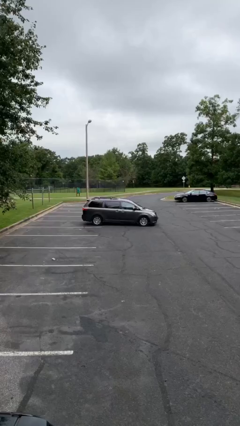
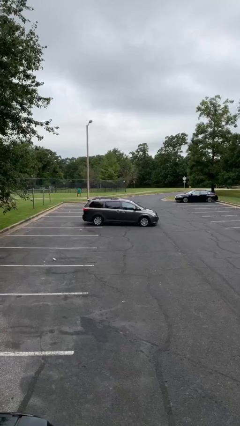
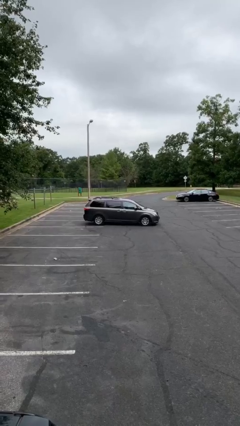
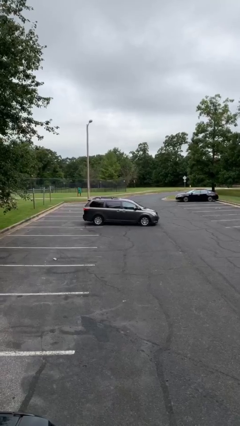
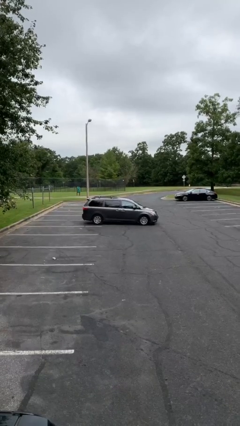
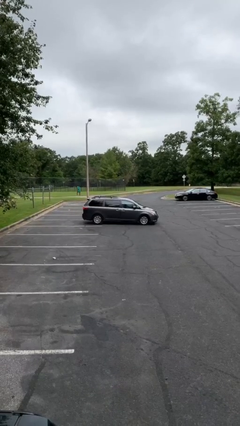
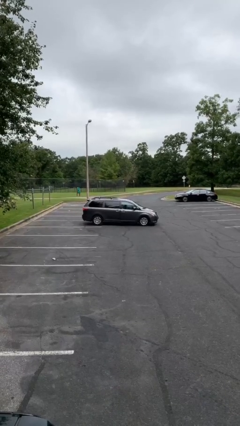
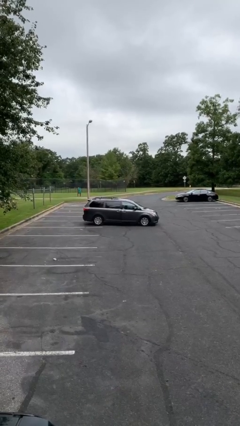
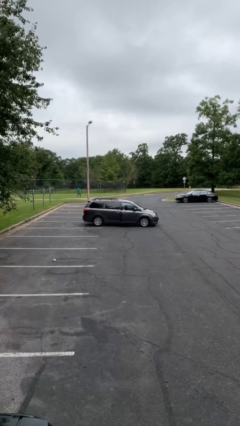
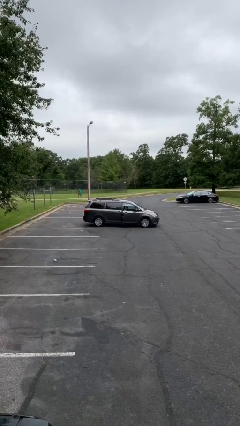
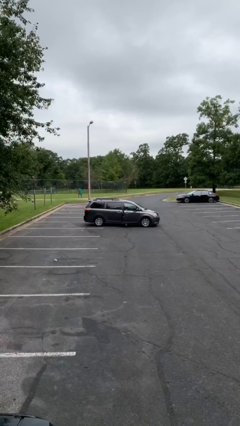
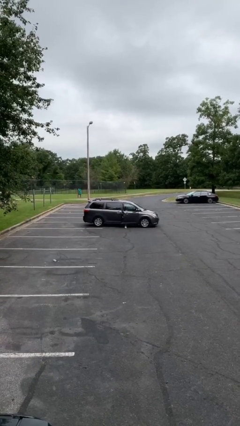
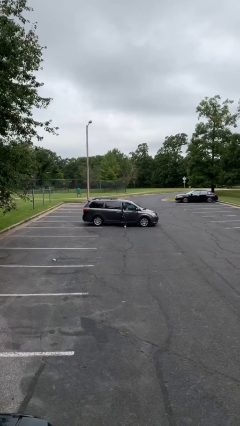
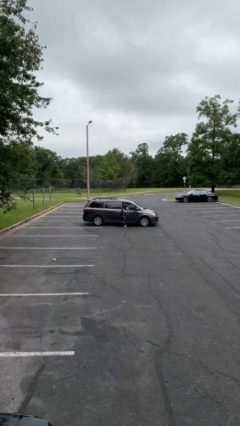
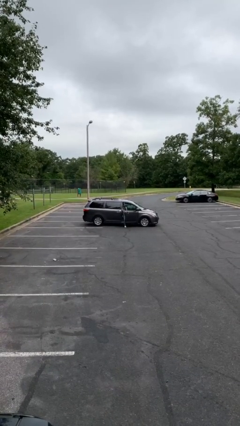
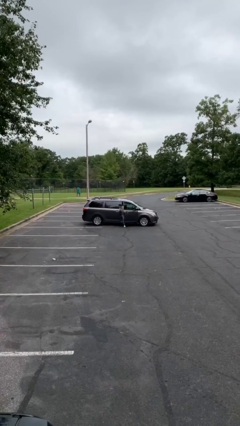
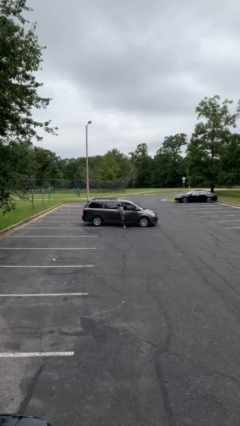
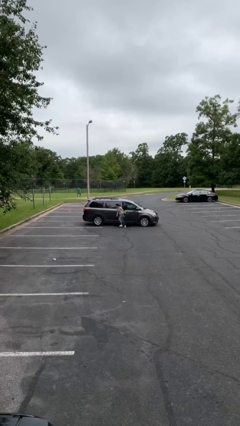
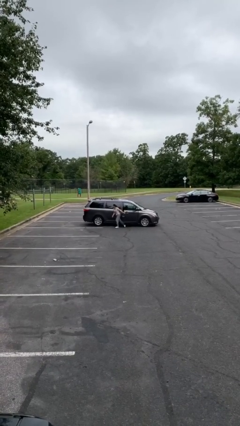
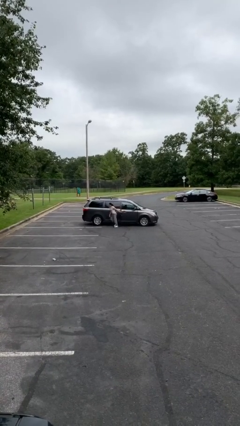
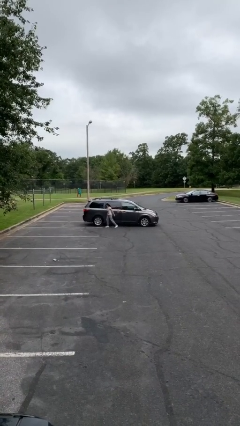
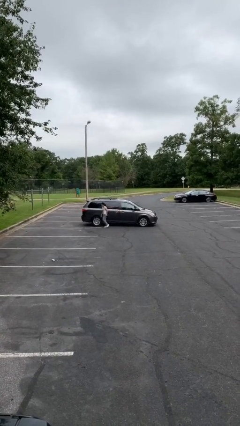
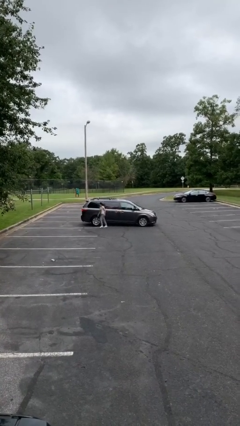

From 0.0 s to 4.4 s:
car drops off person

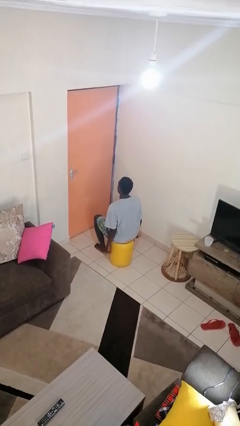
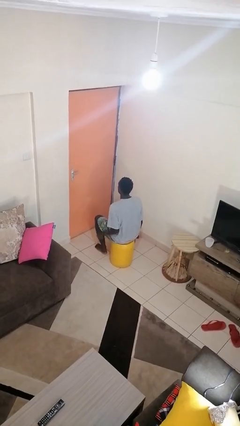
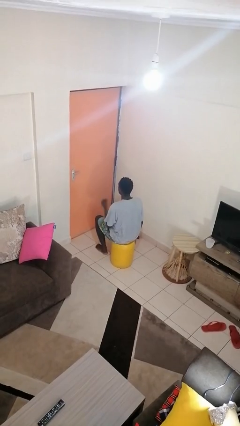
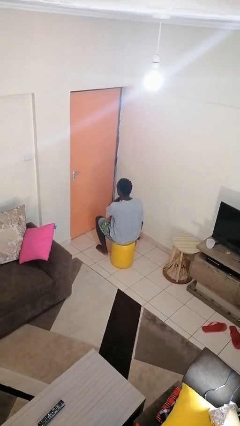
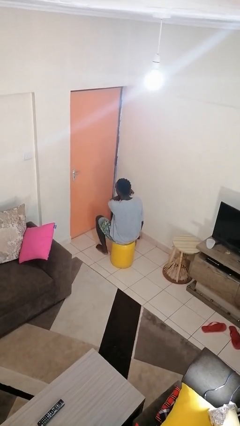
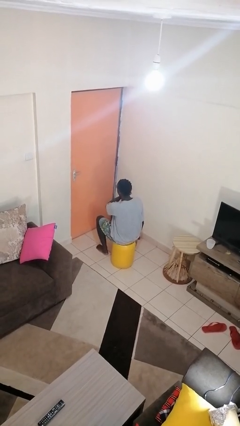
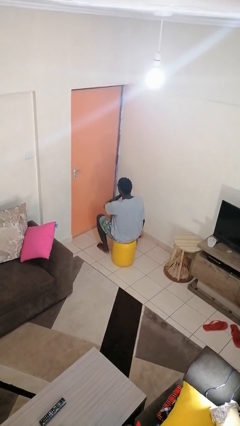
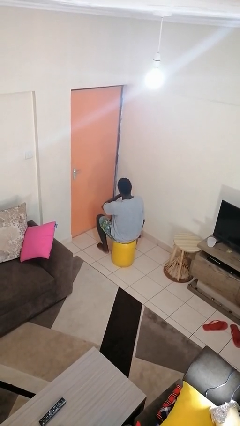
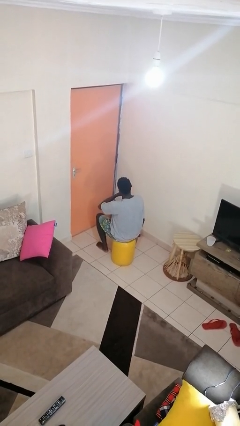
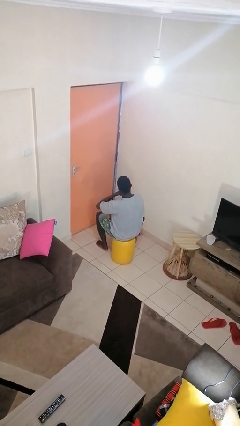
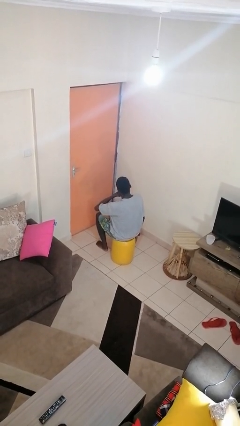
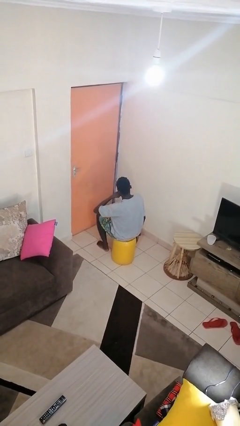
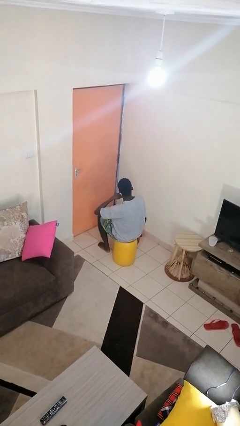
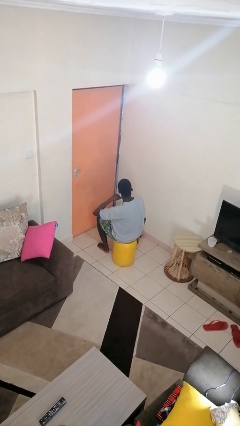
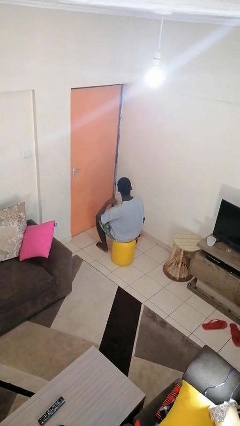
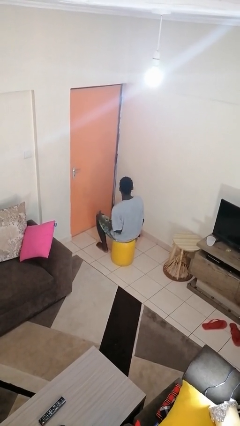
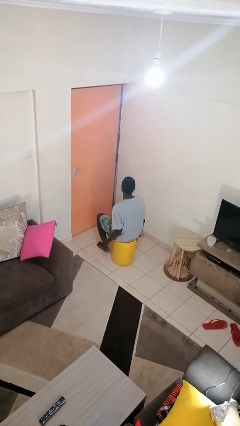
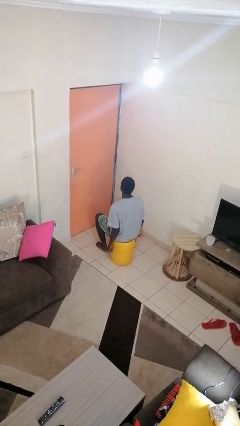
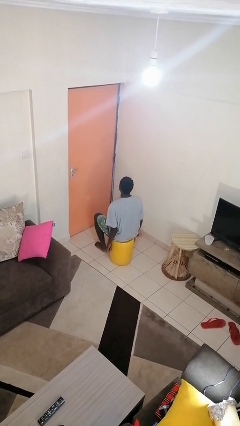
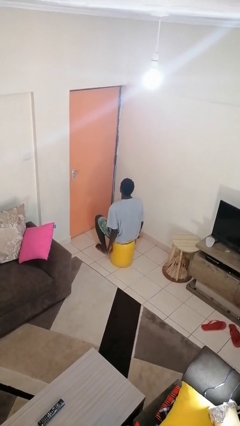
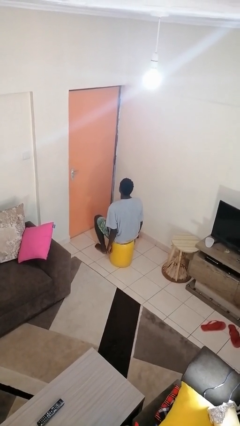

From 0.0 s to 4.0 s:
person gestures cut

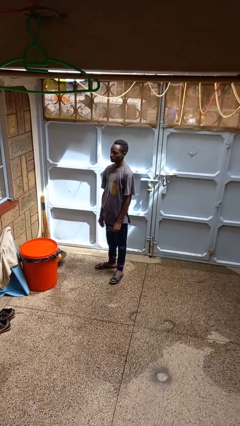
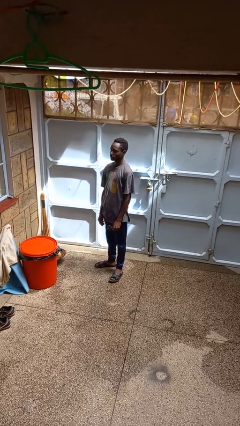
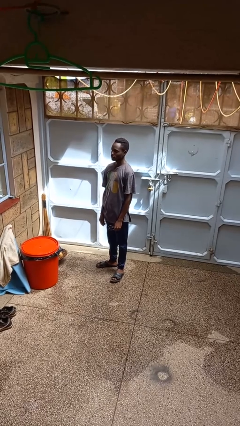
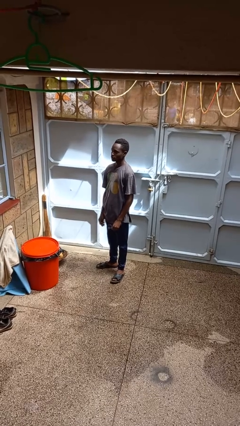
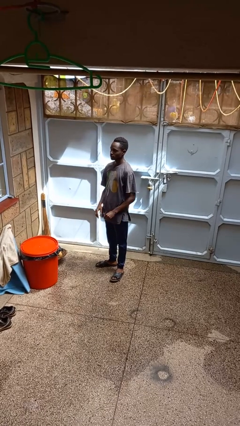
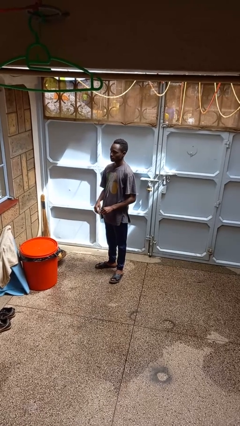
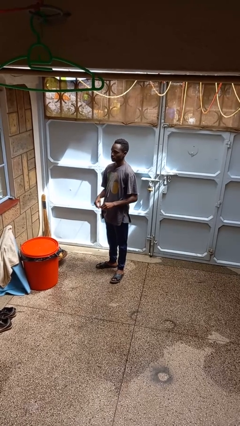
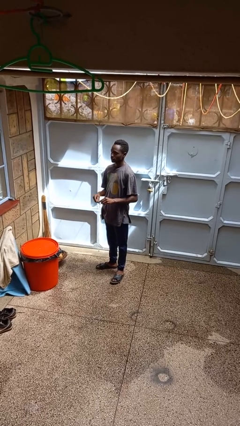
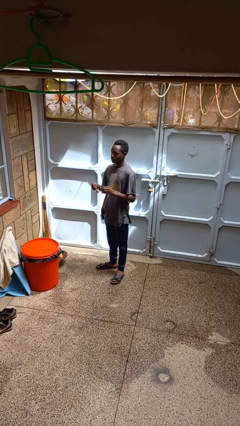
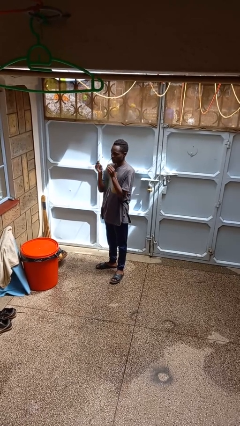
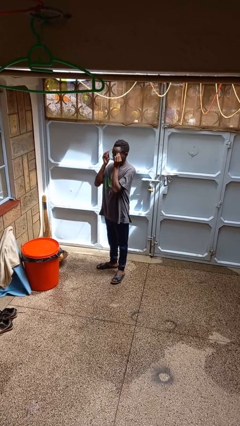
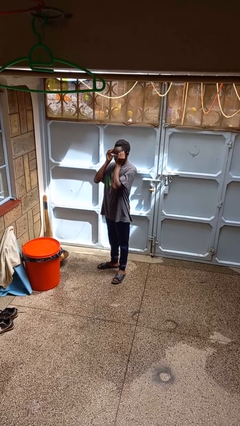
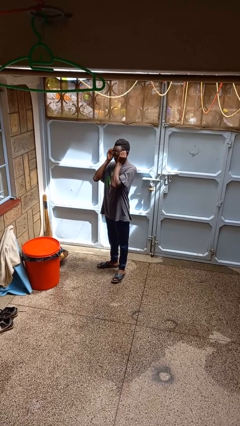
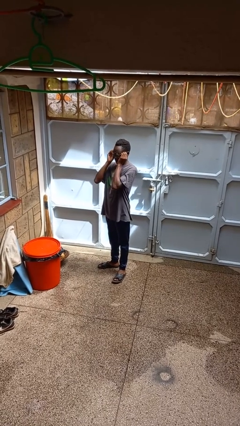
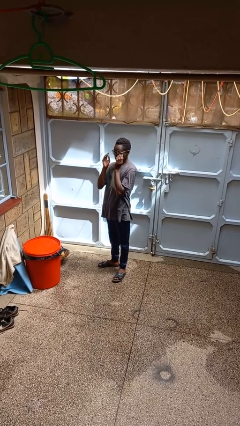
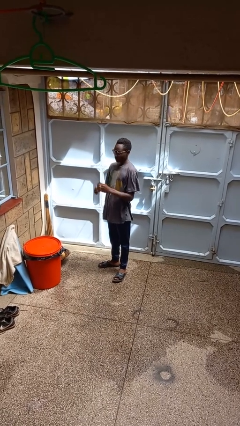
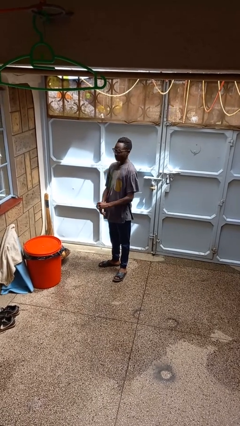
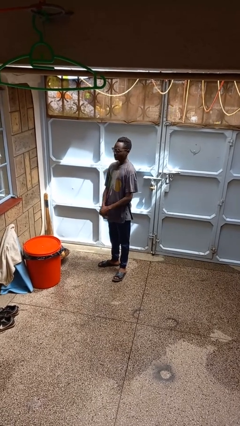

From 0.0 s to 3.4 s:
person puts on glasses

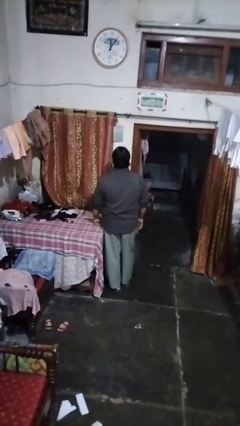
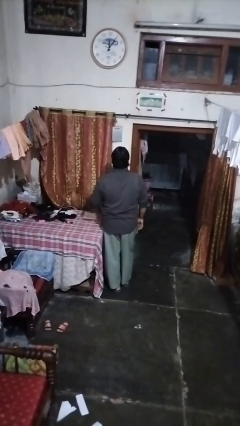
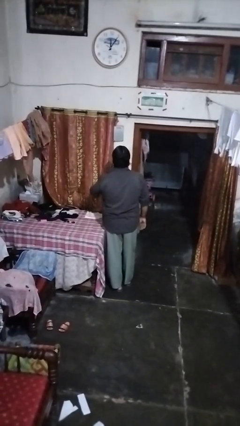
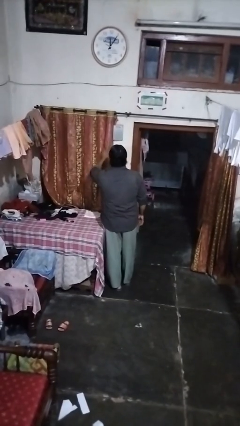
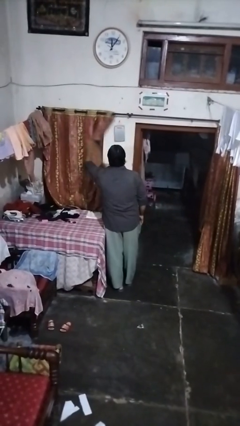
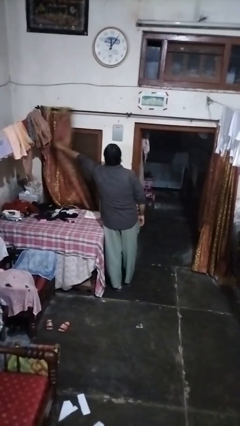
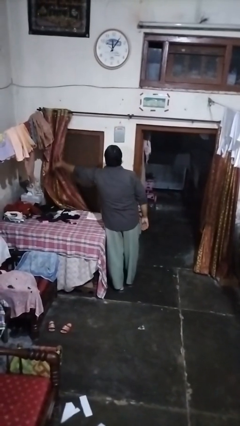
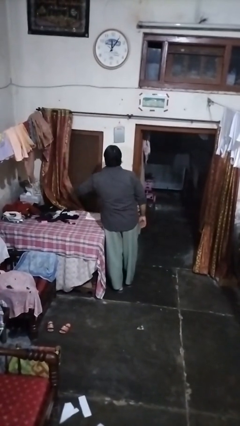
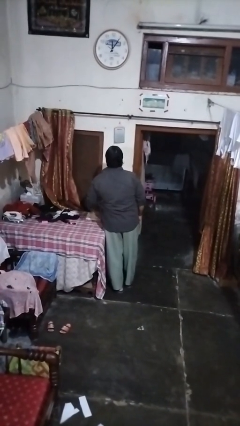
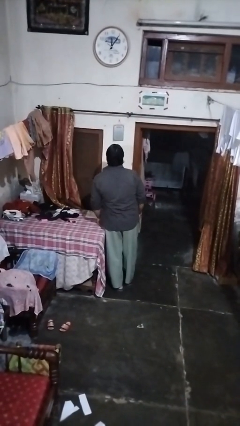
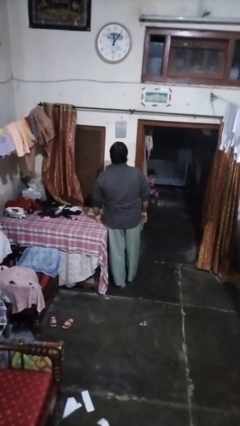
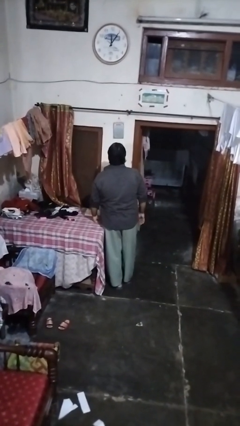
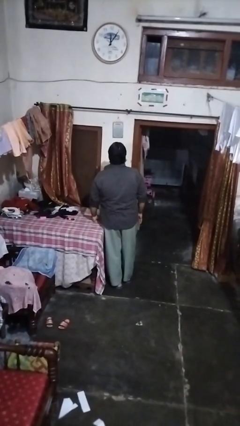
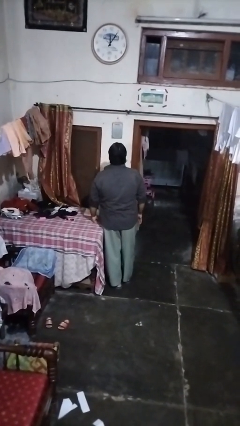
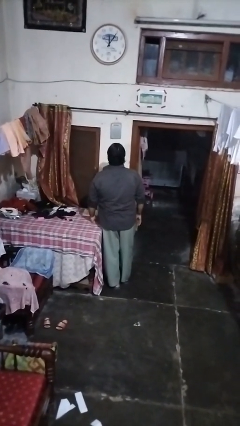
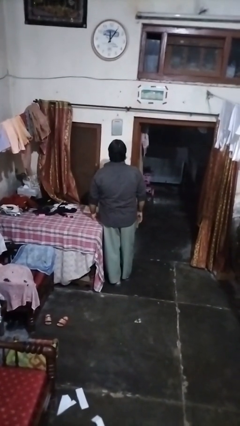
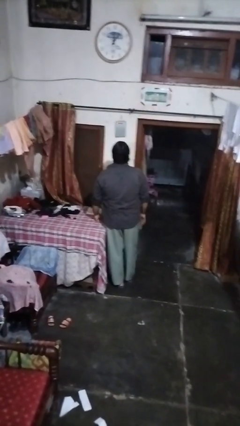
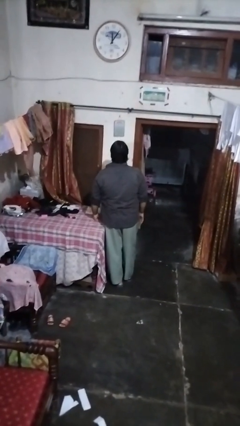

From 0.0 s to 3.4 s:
person opens curtains

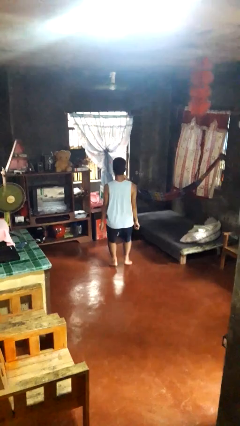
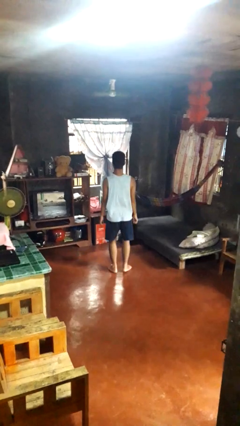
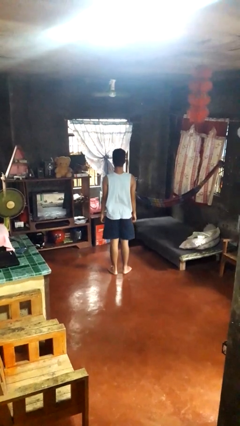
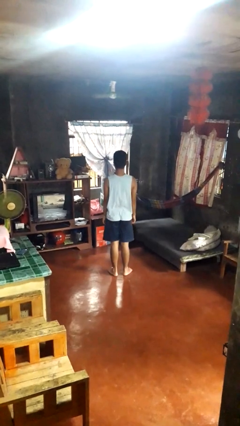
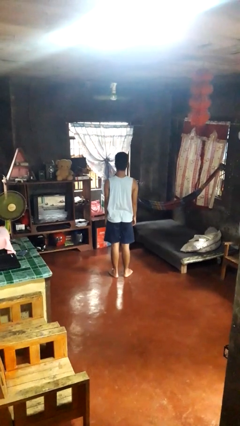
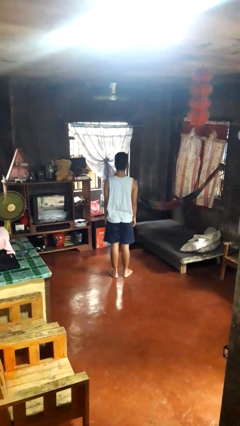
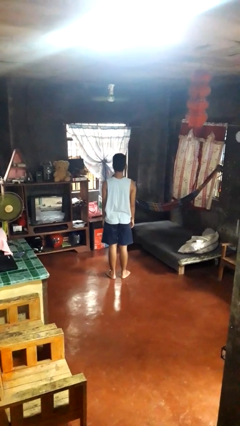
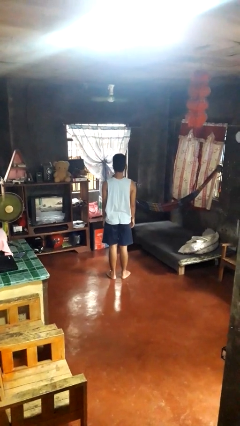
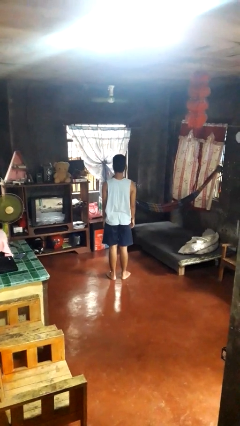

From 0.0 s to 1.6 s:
person stands up

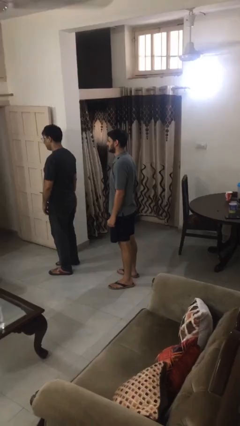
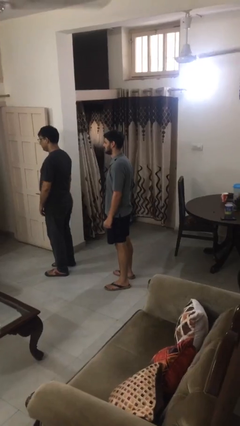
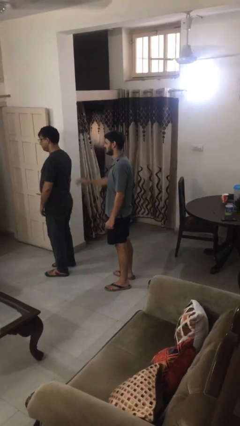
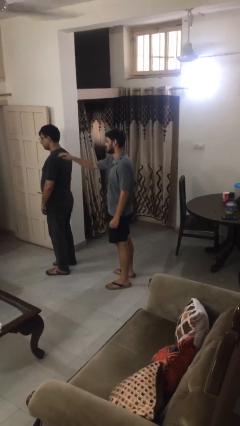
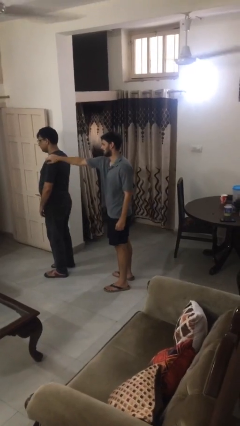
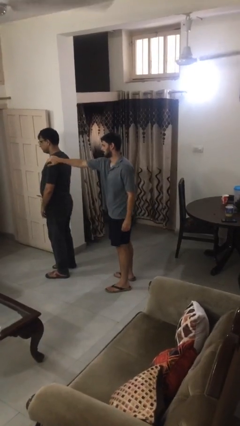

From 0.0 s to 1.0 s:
person grabs person by shoulder
